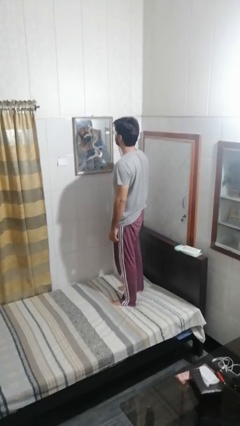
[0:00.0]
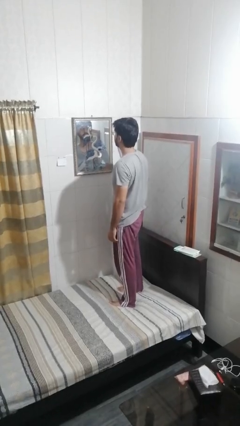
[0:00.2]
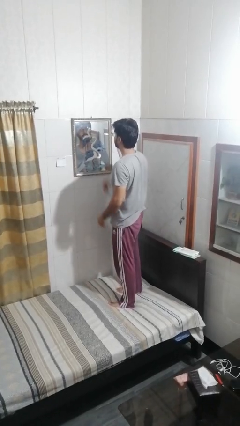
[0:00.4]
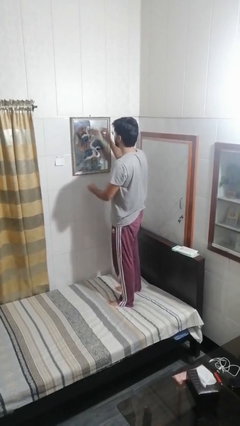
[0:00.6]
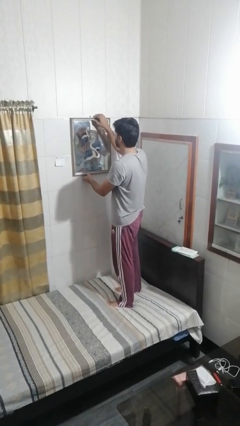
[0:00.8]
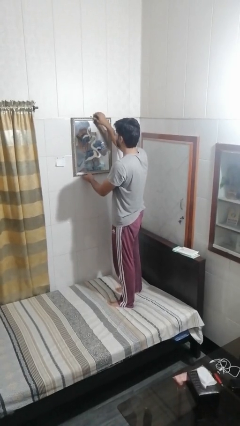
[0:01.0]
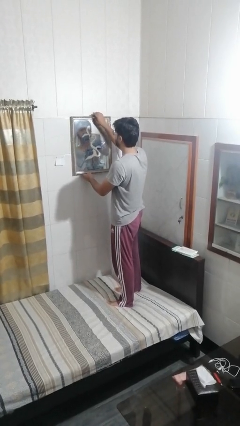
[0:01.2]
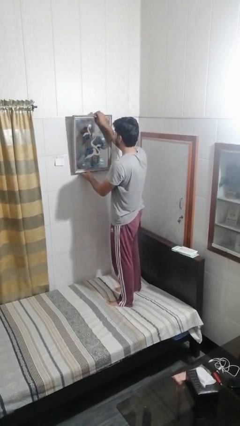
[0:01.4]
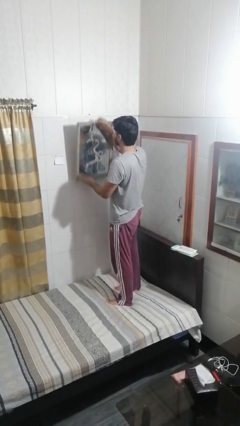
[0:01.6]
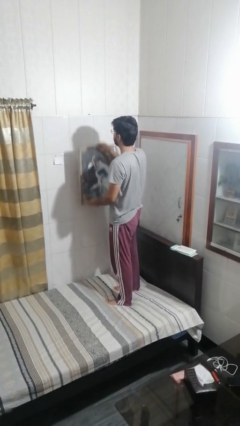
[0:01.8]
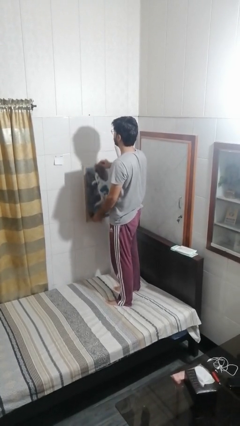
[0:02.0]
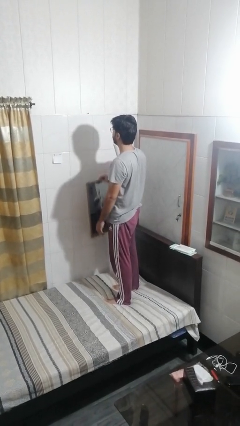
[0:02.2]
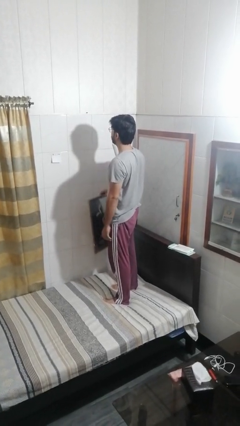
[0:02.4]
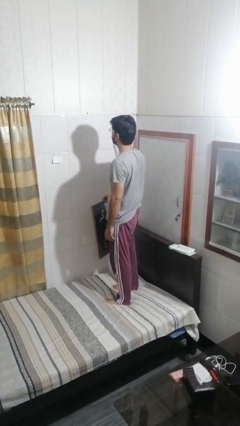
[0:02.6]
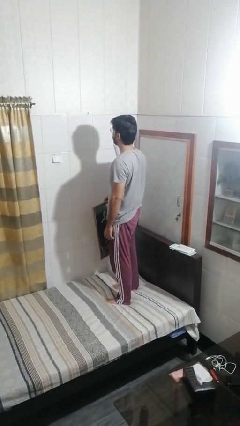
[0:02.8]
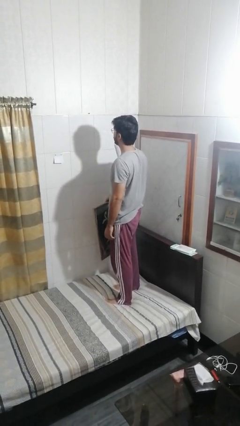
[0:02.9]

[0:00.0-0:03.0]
person takes down picture frame

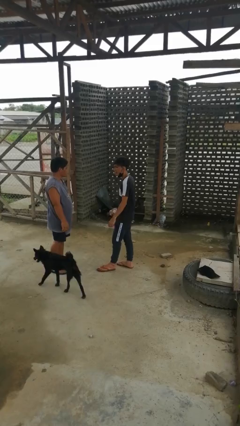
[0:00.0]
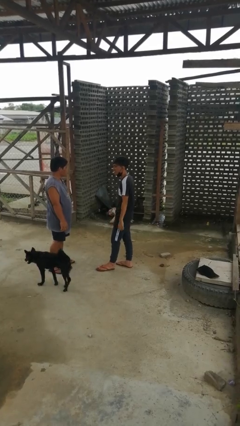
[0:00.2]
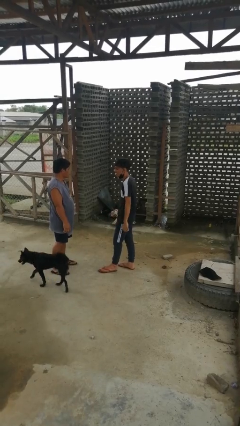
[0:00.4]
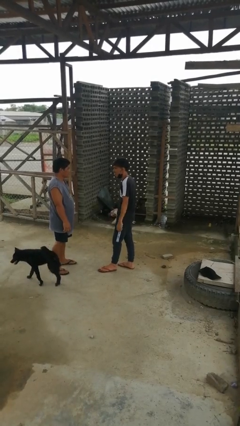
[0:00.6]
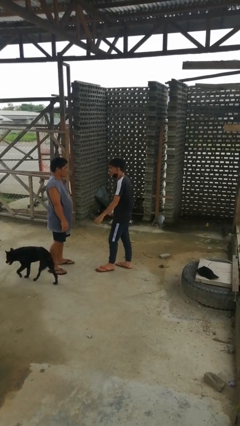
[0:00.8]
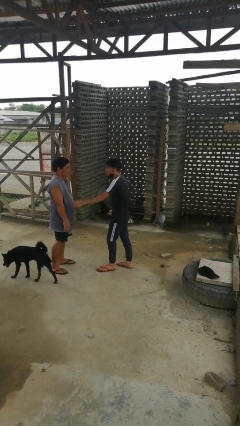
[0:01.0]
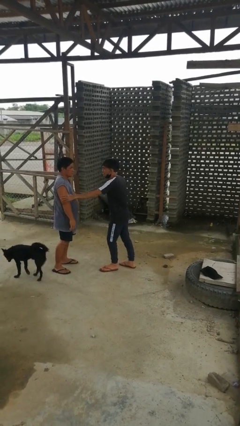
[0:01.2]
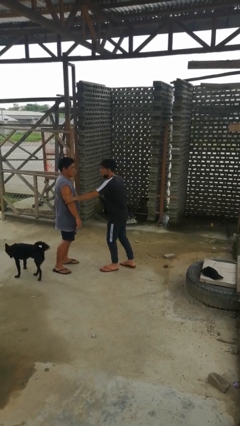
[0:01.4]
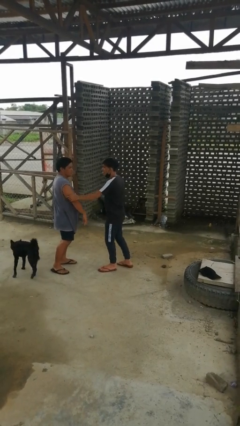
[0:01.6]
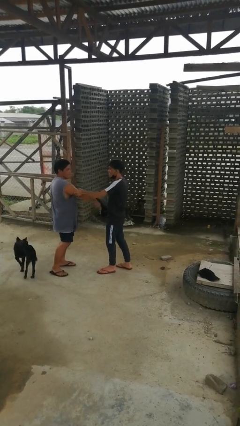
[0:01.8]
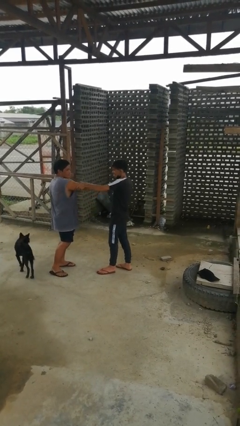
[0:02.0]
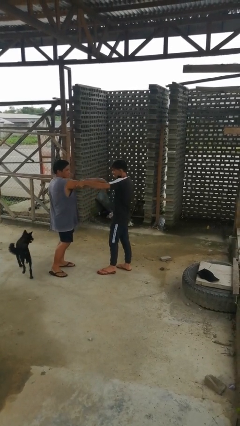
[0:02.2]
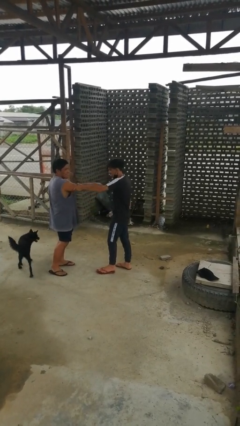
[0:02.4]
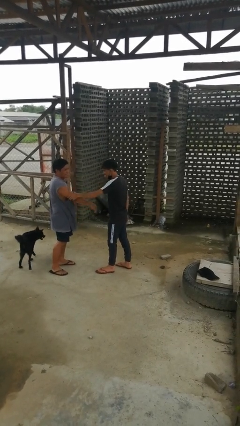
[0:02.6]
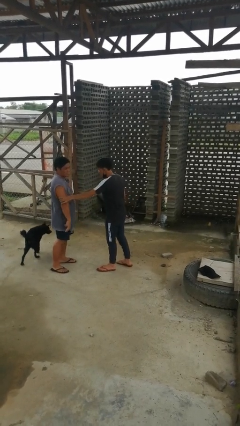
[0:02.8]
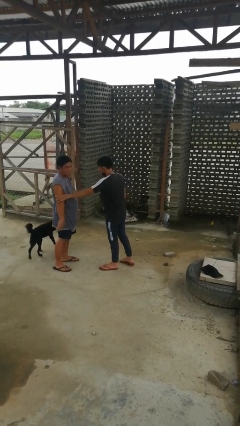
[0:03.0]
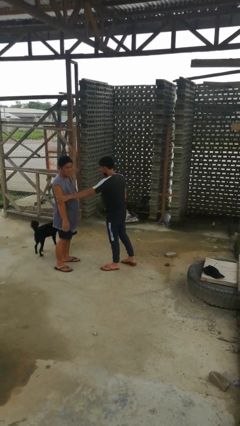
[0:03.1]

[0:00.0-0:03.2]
person grabs person by bicep

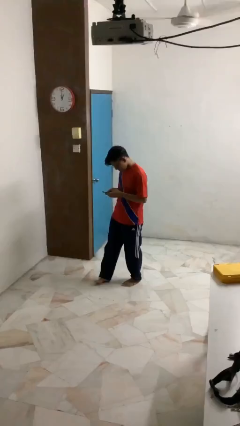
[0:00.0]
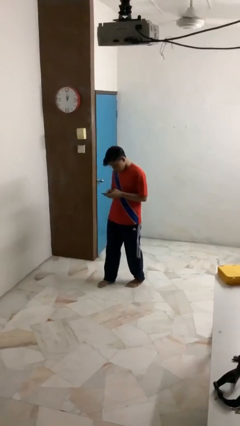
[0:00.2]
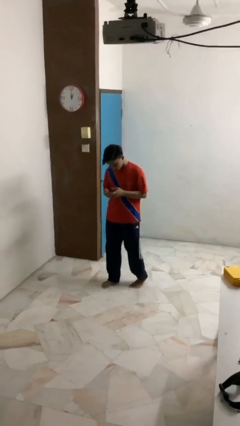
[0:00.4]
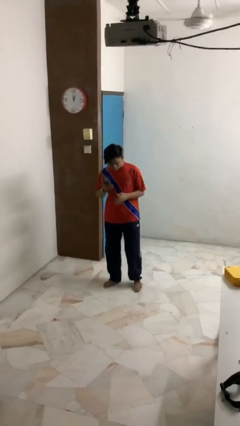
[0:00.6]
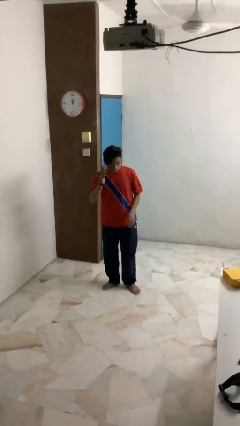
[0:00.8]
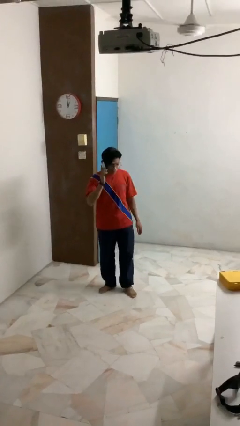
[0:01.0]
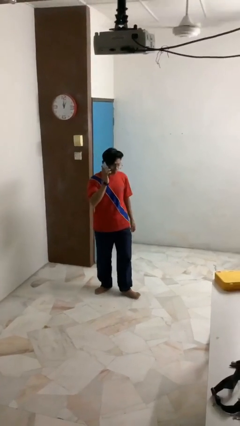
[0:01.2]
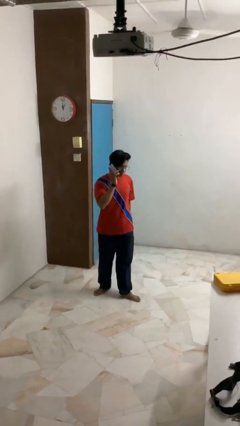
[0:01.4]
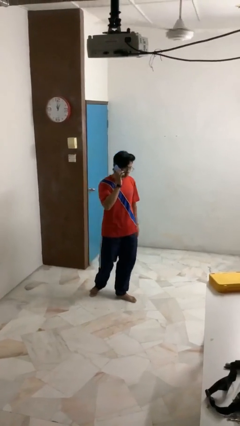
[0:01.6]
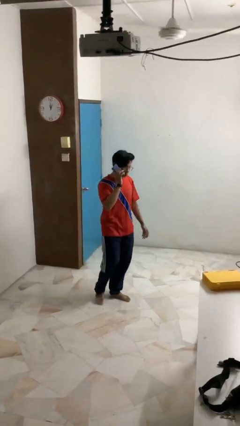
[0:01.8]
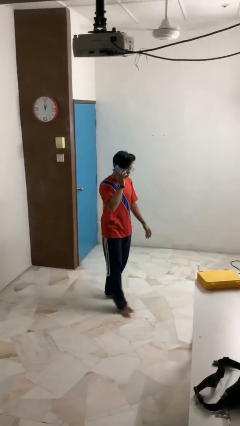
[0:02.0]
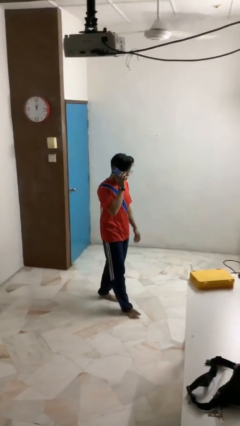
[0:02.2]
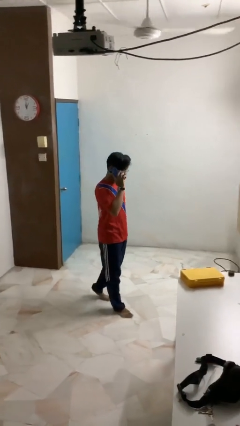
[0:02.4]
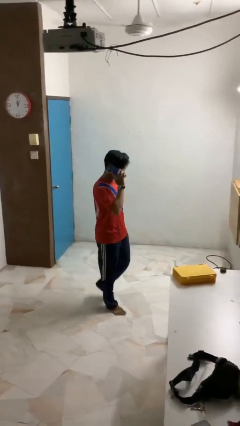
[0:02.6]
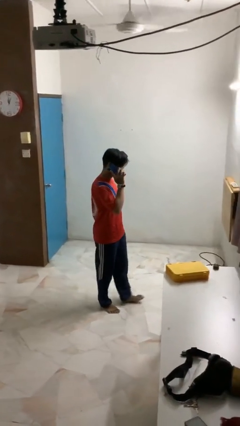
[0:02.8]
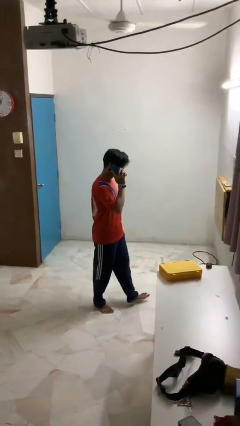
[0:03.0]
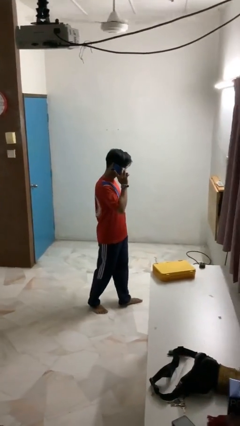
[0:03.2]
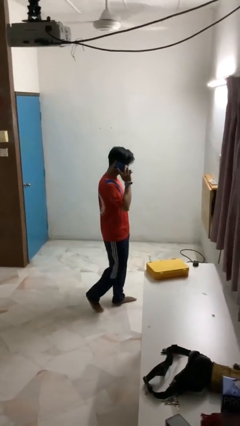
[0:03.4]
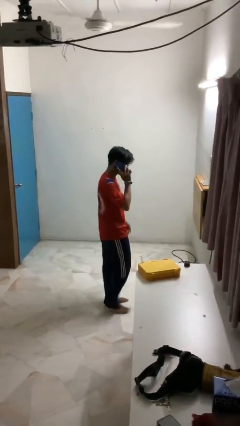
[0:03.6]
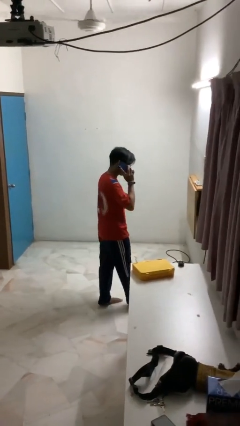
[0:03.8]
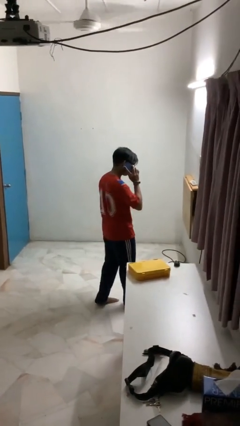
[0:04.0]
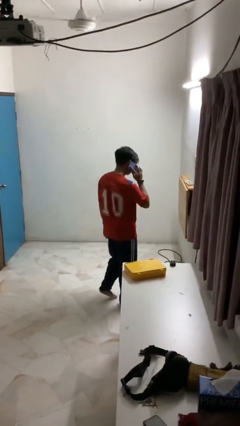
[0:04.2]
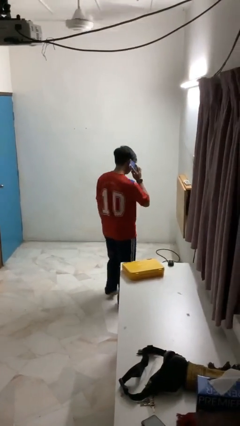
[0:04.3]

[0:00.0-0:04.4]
person talks on phone

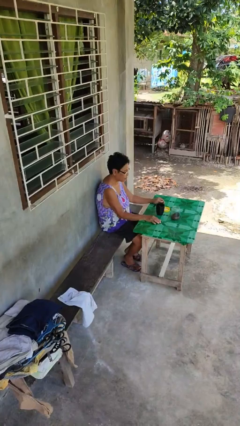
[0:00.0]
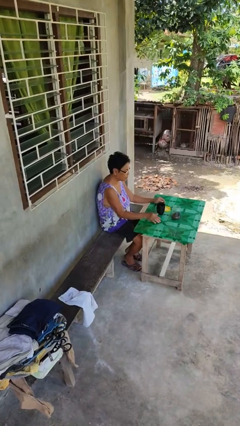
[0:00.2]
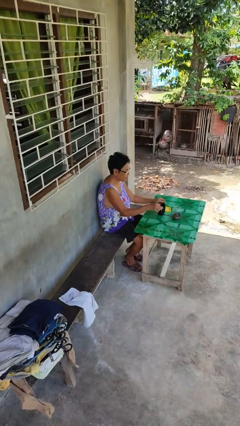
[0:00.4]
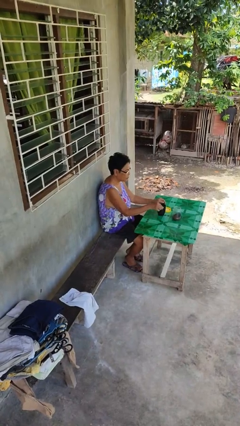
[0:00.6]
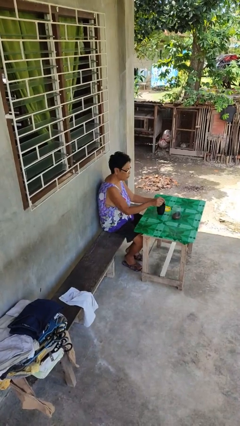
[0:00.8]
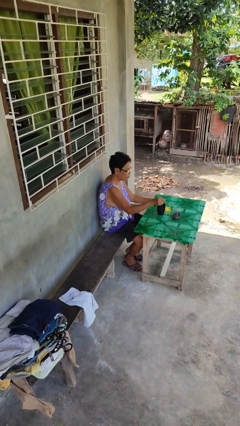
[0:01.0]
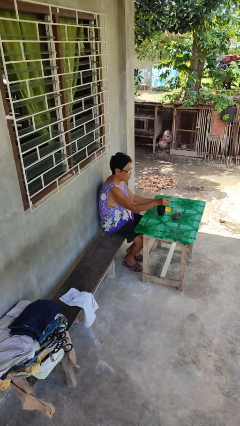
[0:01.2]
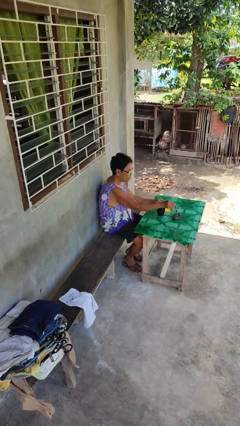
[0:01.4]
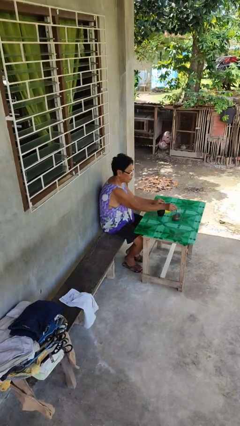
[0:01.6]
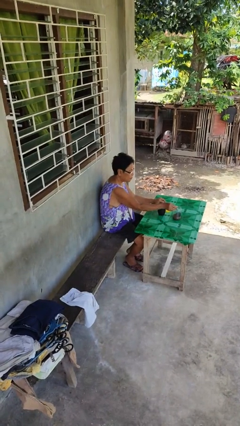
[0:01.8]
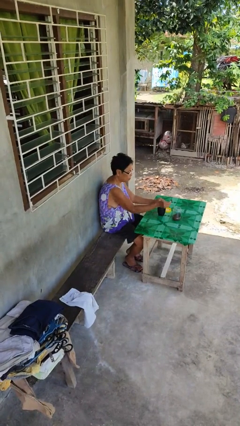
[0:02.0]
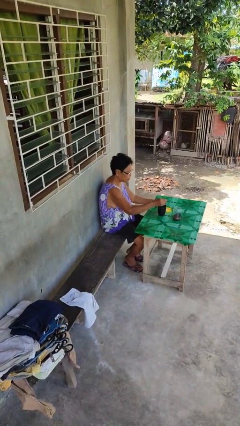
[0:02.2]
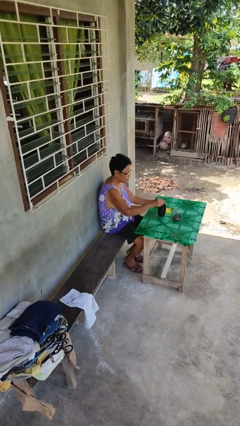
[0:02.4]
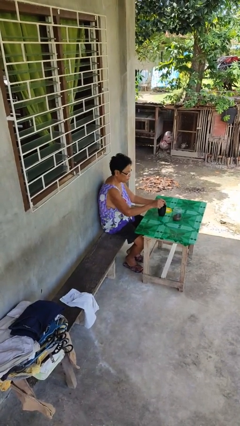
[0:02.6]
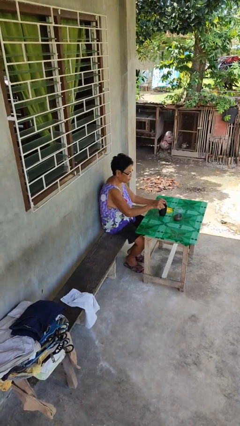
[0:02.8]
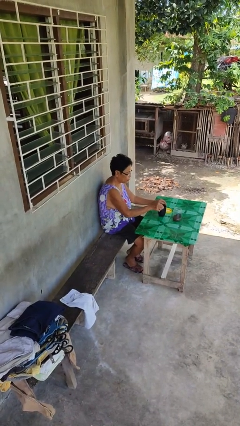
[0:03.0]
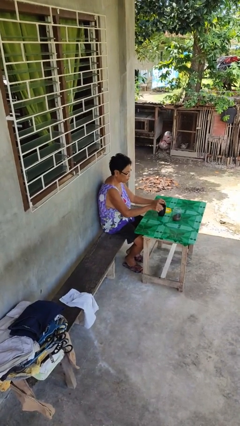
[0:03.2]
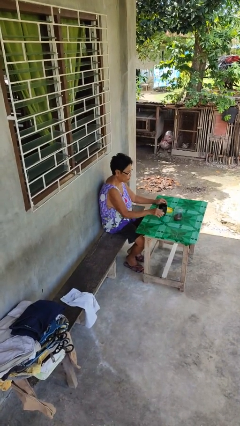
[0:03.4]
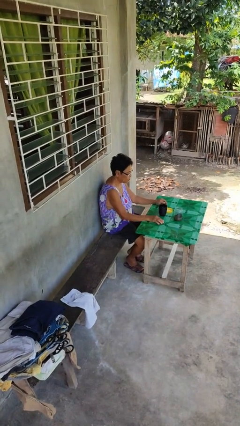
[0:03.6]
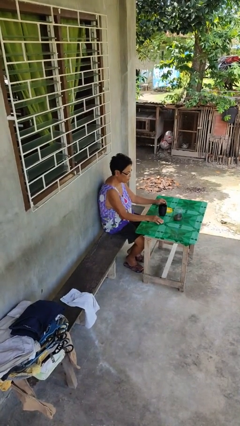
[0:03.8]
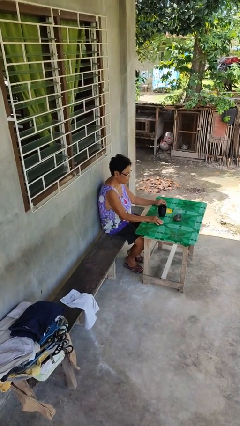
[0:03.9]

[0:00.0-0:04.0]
person pours coffee into mug

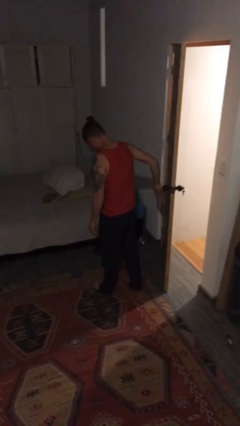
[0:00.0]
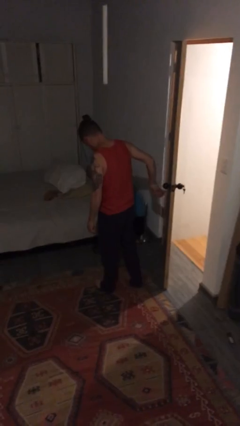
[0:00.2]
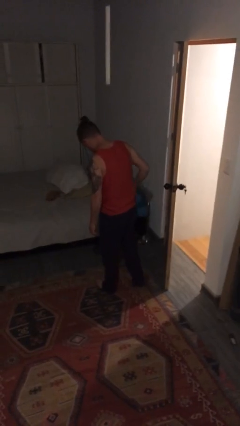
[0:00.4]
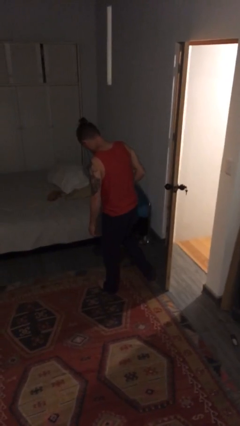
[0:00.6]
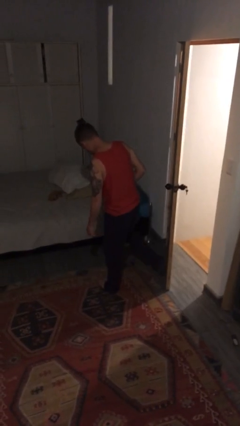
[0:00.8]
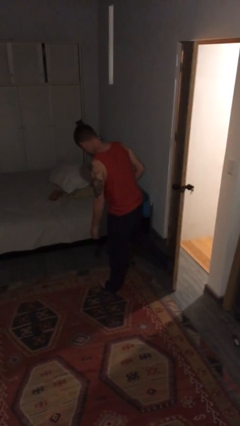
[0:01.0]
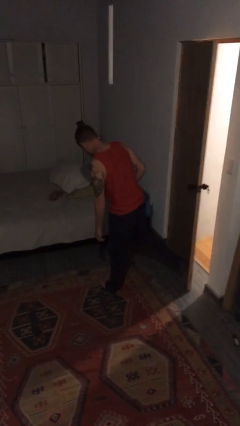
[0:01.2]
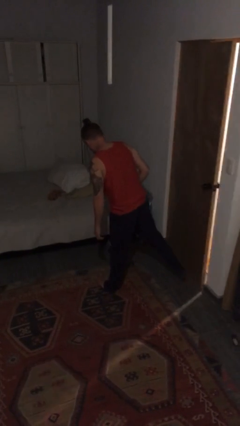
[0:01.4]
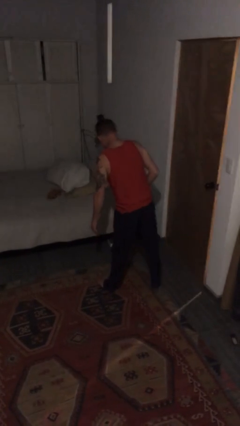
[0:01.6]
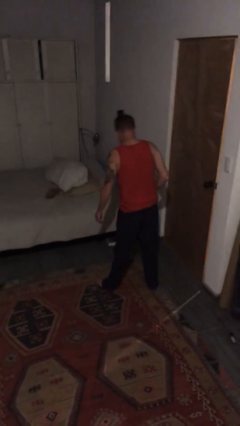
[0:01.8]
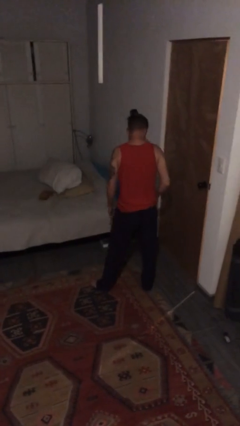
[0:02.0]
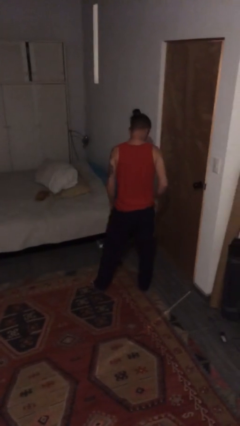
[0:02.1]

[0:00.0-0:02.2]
person closes door with foot

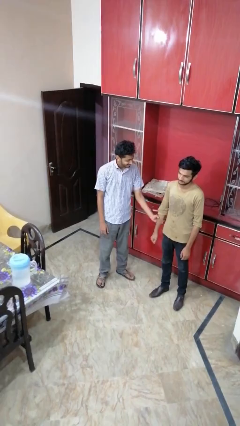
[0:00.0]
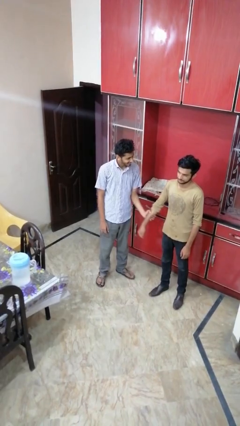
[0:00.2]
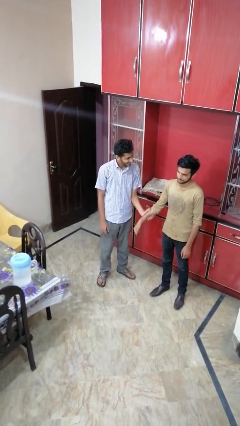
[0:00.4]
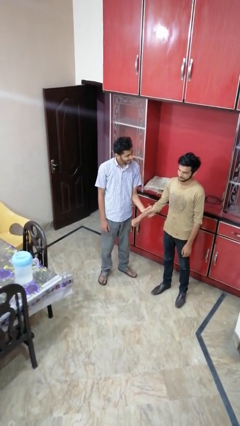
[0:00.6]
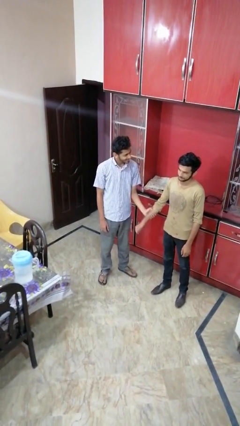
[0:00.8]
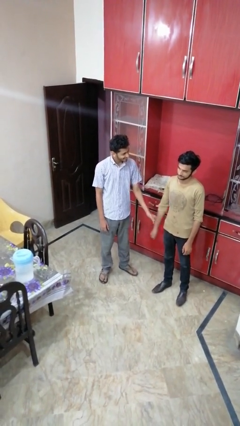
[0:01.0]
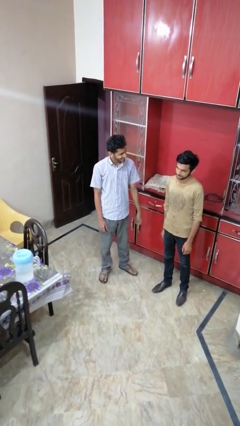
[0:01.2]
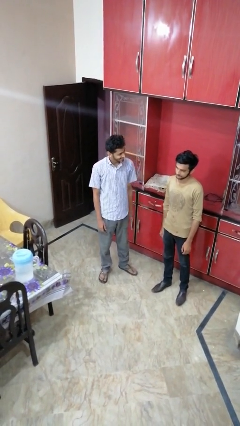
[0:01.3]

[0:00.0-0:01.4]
person grabs person by forearm
